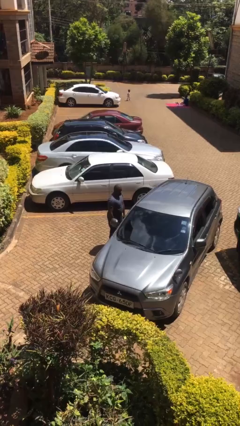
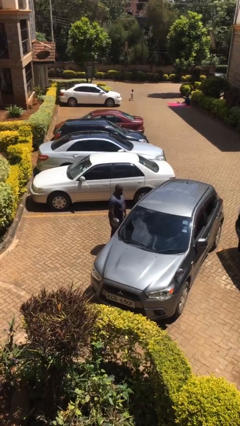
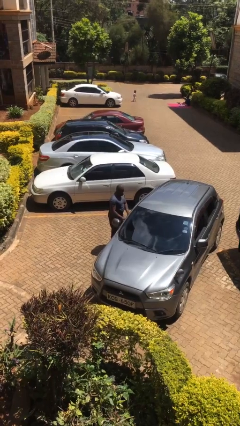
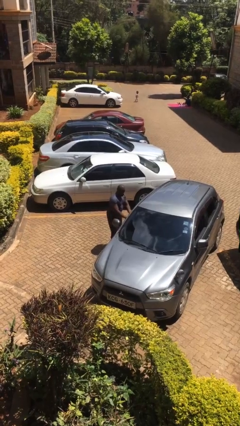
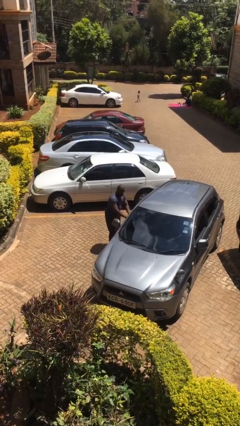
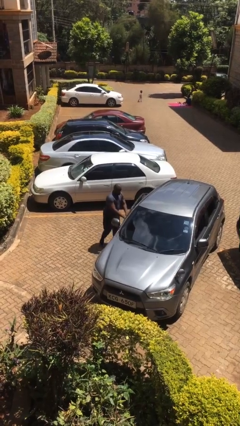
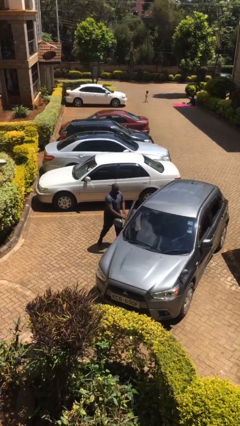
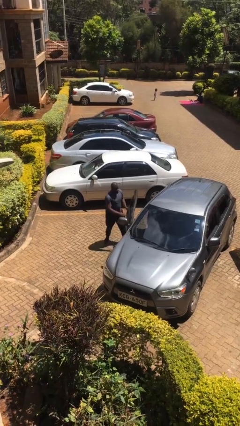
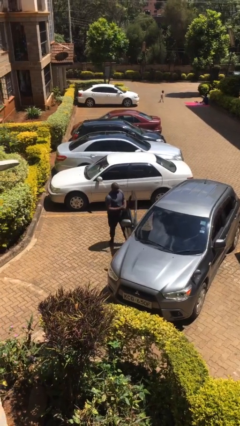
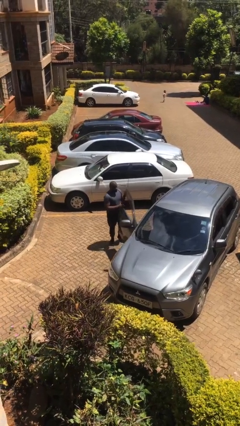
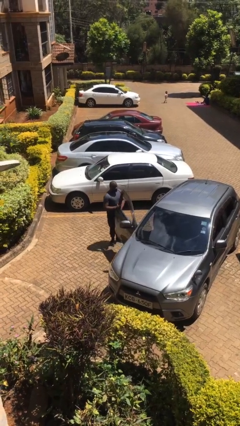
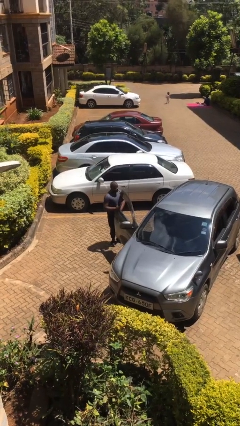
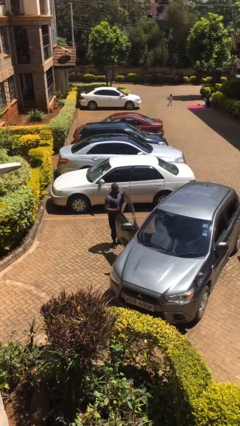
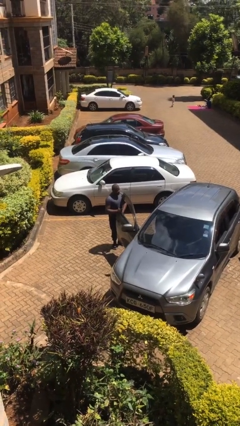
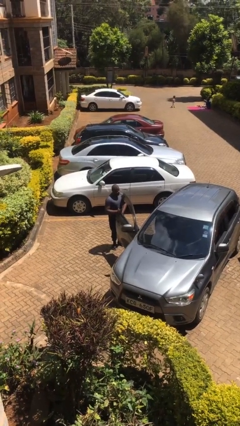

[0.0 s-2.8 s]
person opens car door

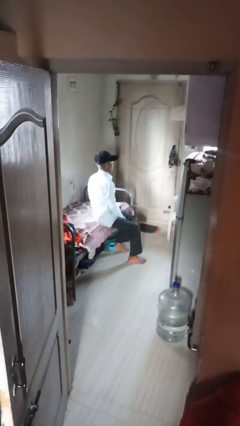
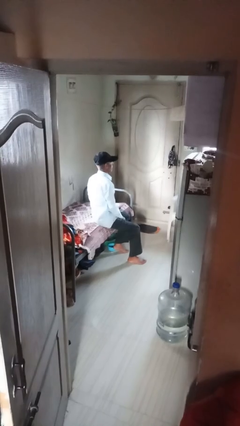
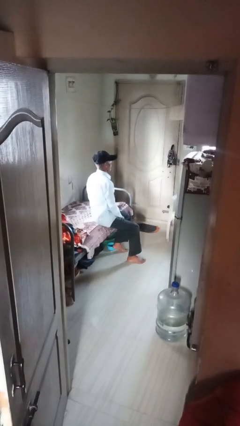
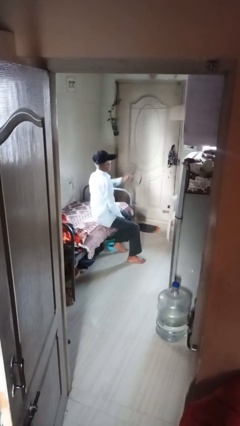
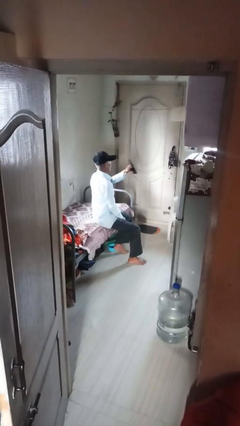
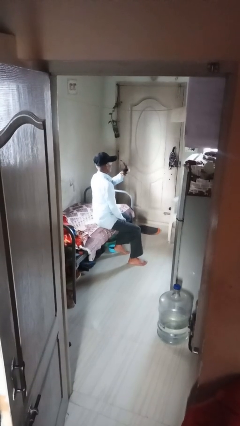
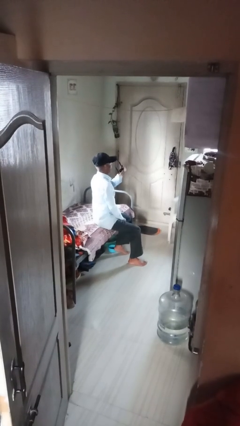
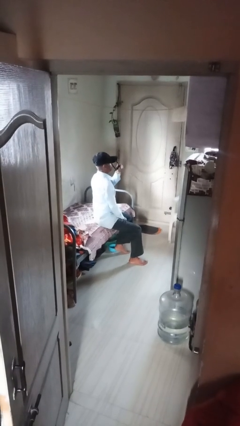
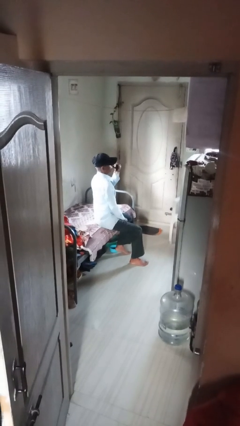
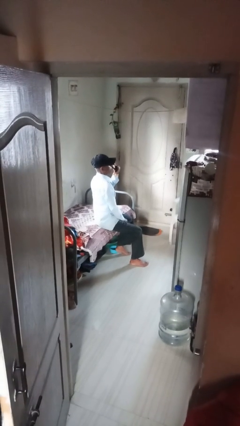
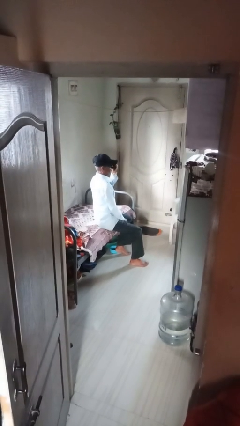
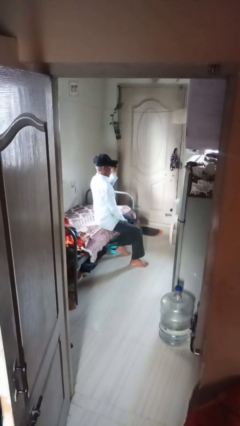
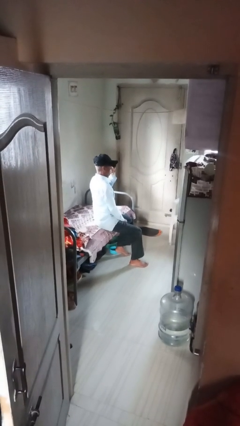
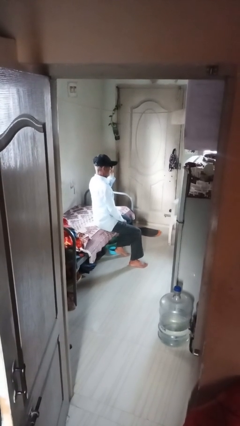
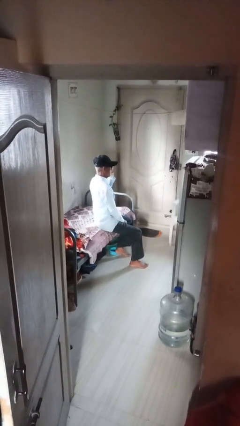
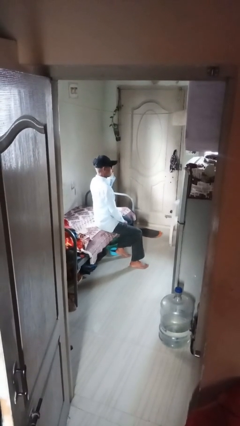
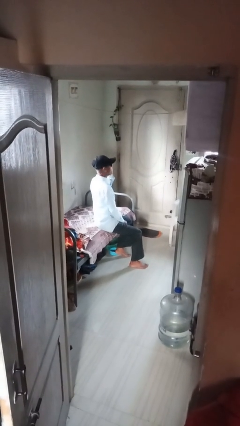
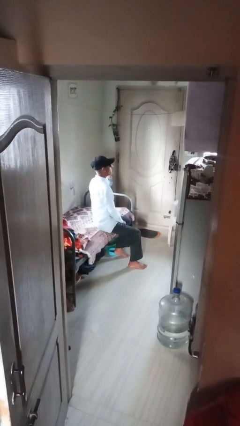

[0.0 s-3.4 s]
person puts on sunglasses

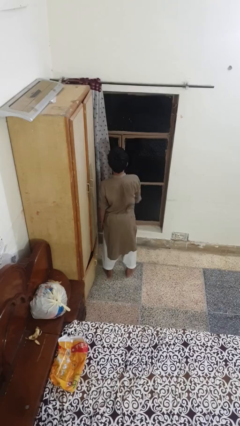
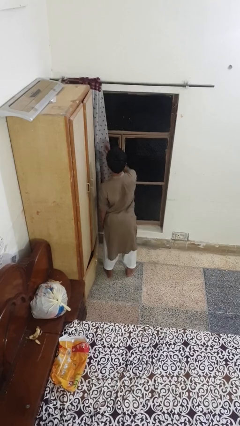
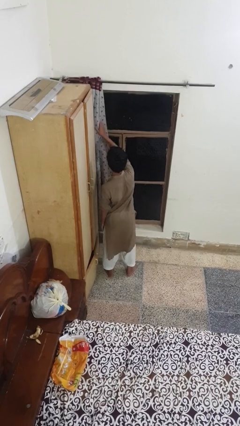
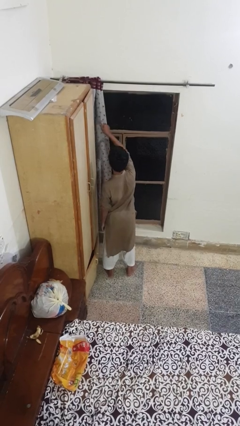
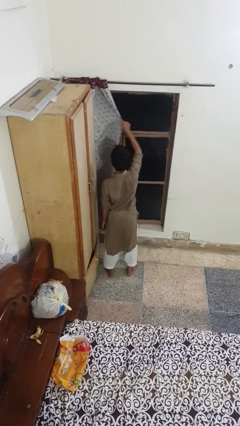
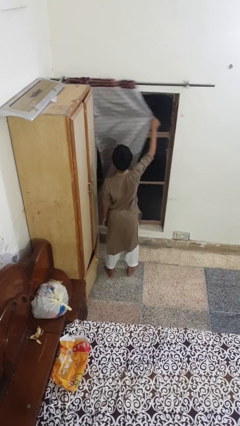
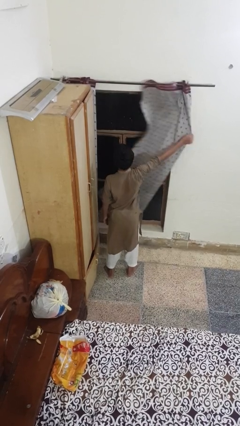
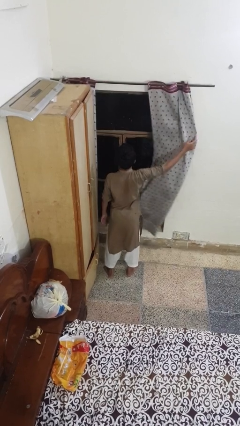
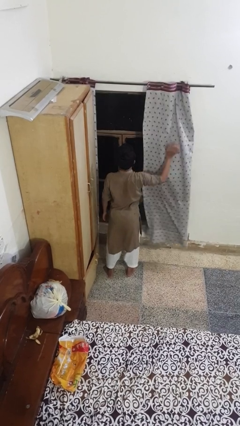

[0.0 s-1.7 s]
person closes curtains

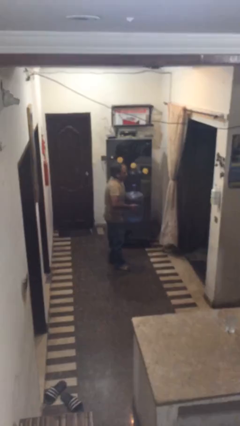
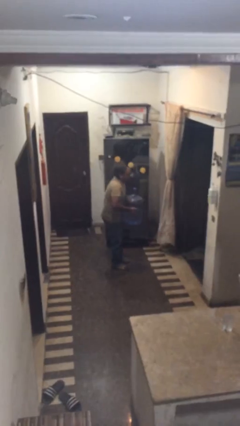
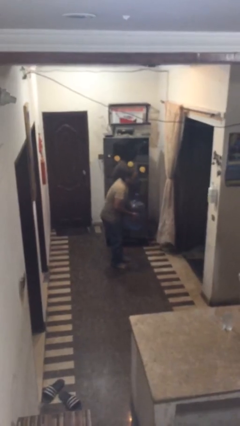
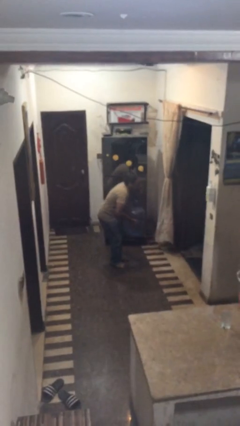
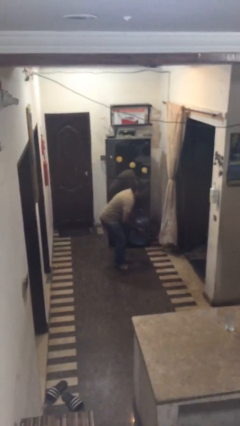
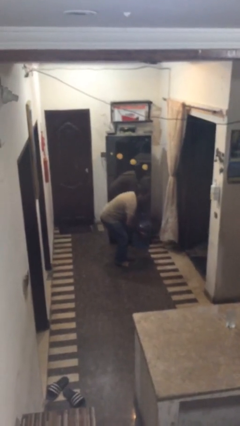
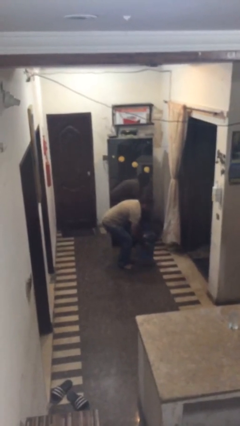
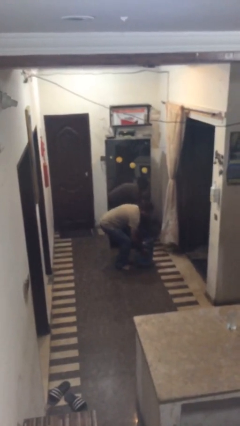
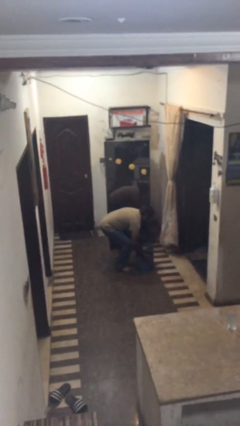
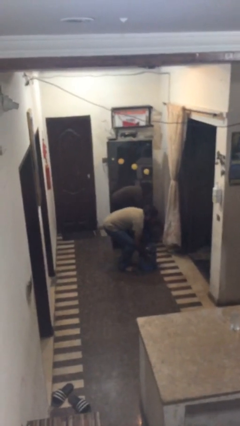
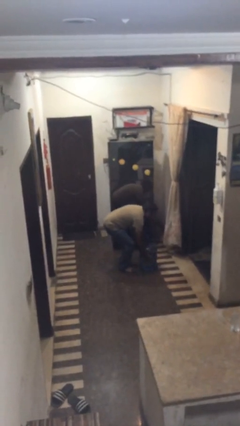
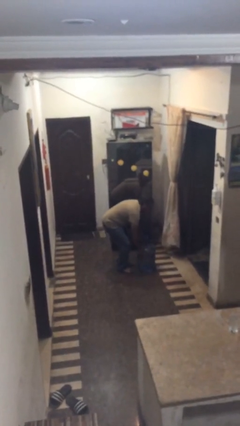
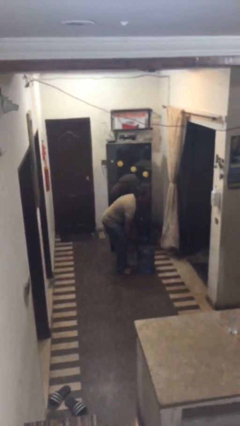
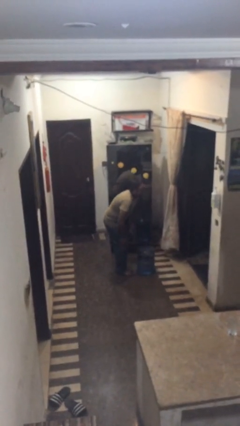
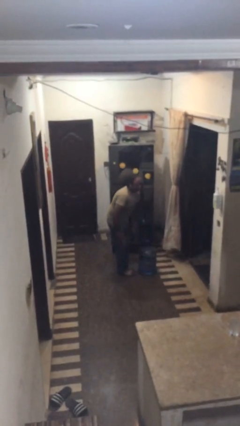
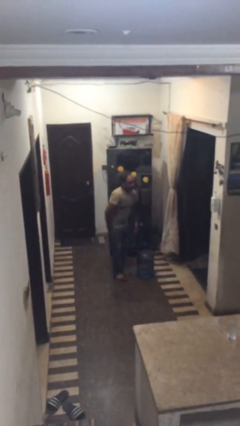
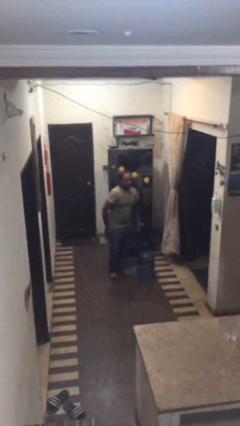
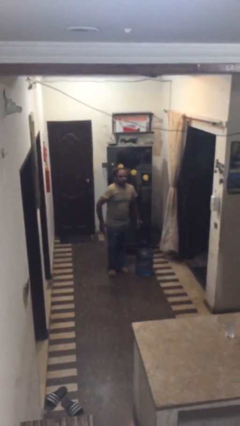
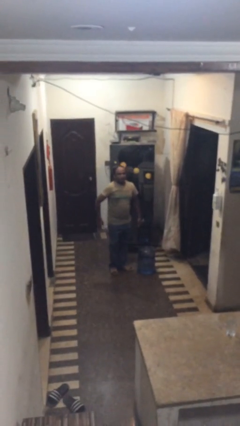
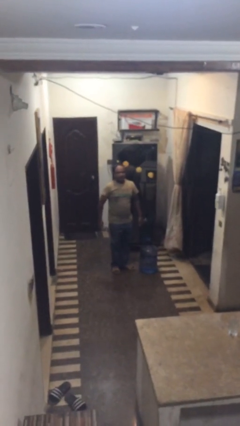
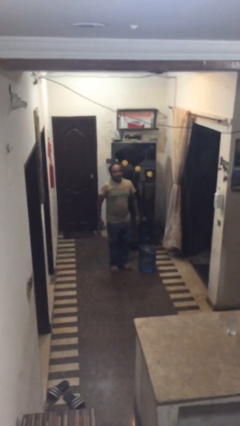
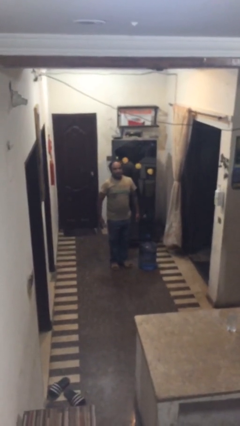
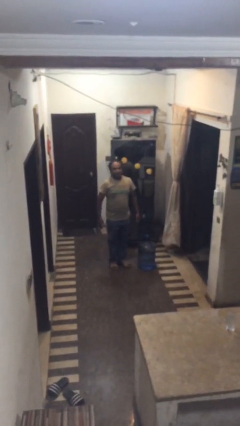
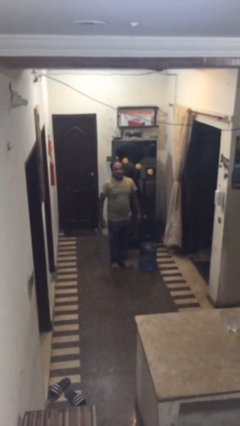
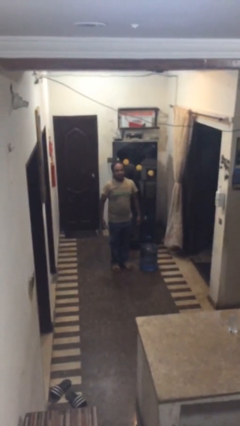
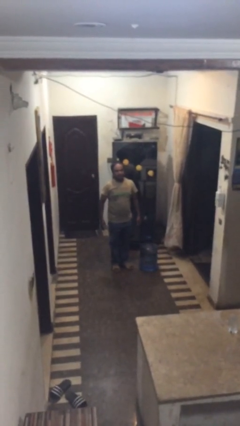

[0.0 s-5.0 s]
person puts down object on floor

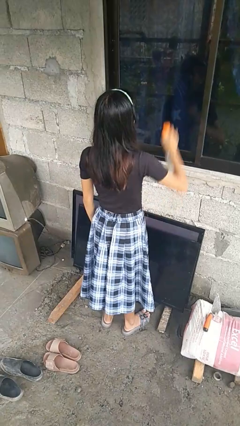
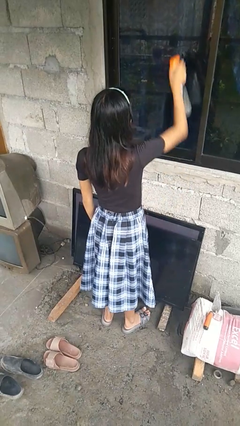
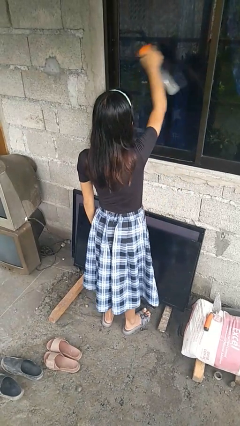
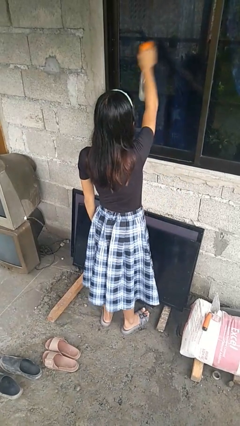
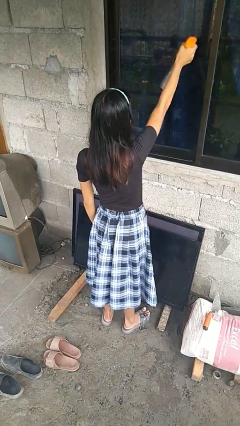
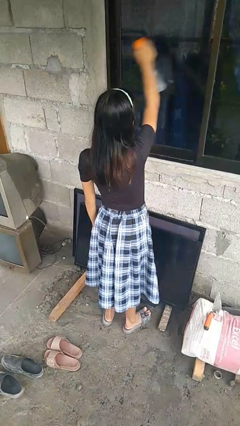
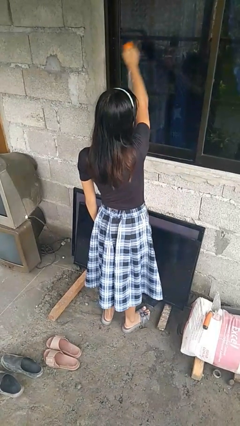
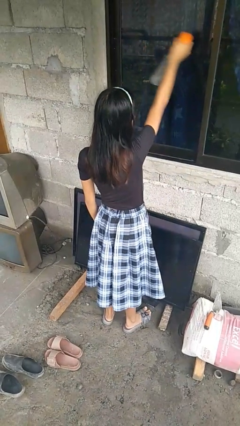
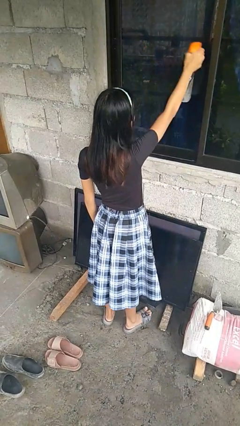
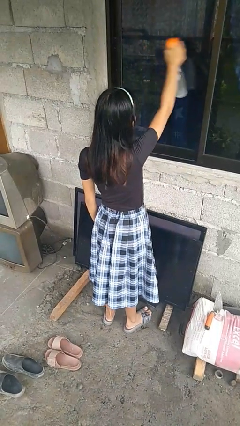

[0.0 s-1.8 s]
person sprays from bottle

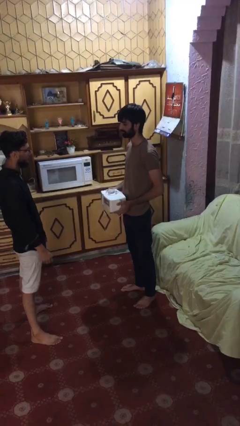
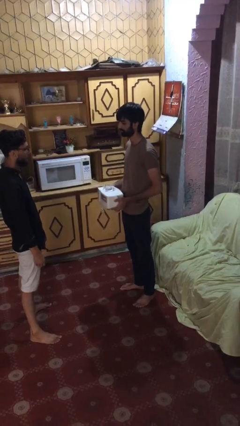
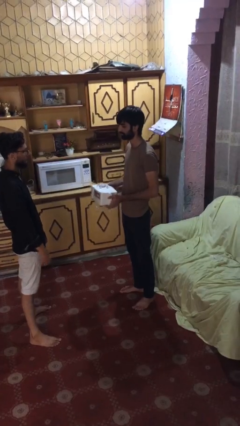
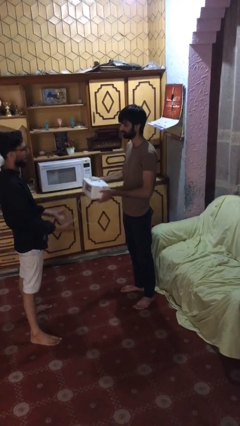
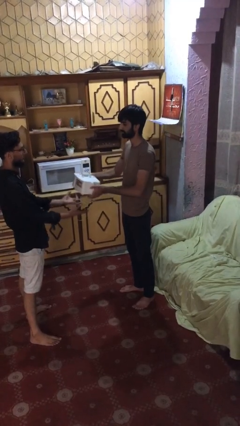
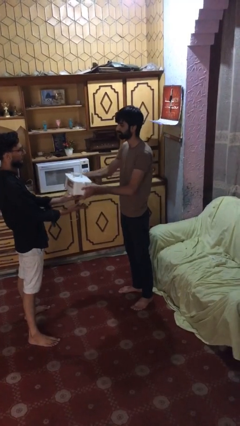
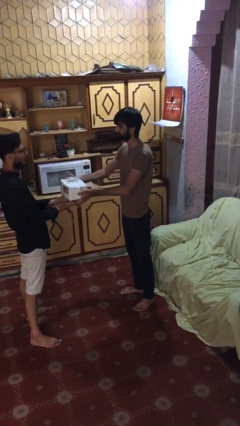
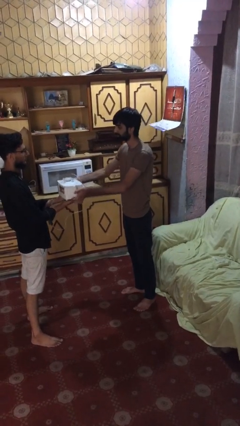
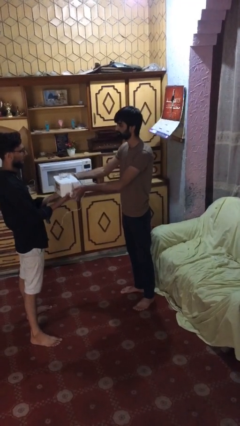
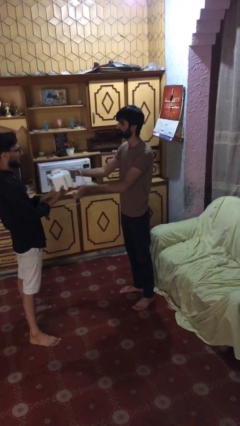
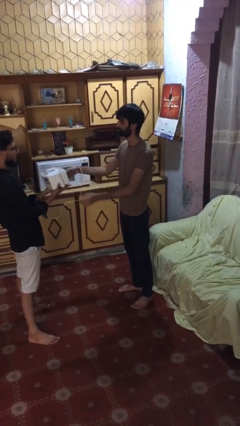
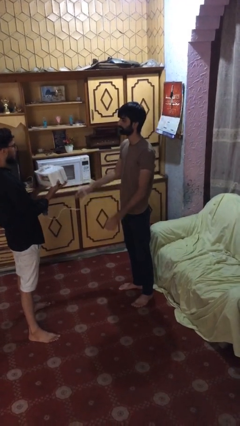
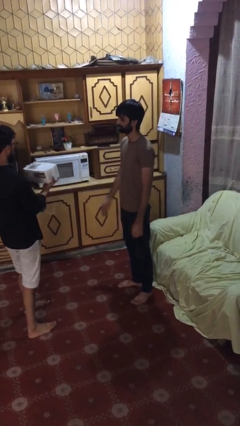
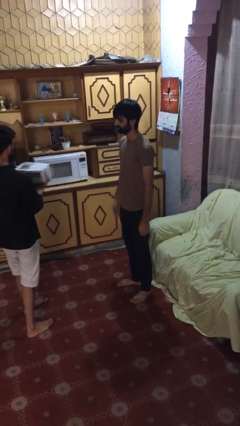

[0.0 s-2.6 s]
person transfers object to person

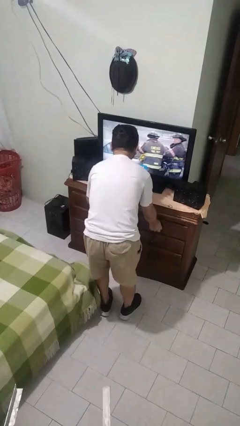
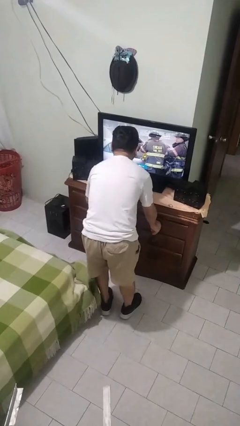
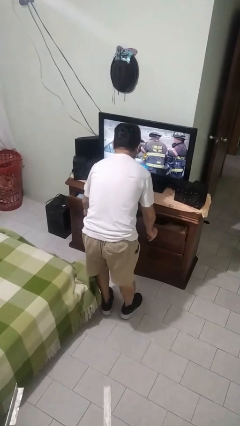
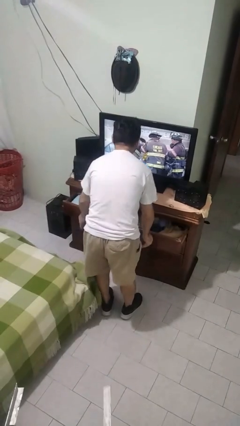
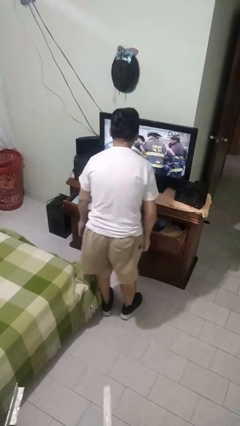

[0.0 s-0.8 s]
person opens dresser drawer
